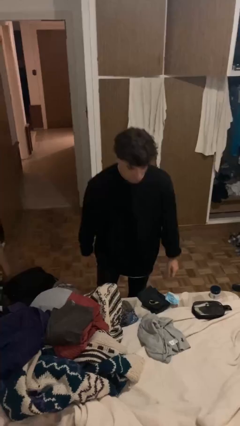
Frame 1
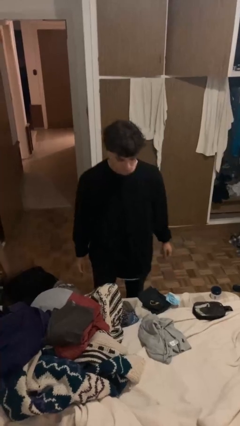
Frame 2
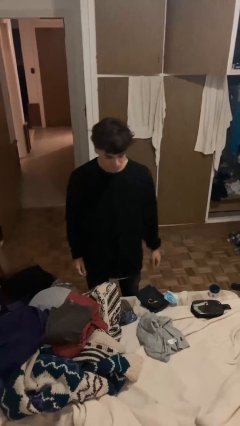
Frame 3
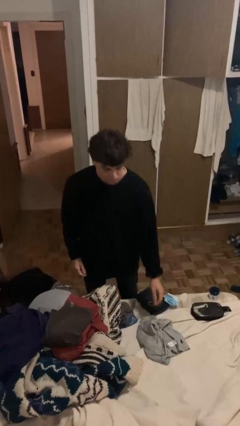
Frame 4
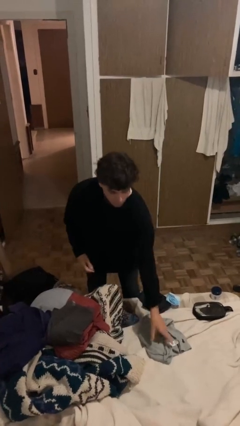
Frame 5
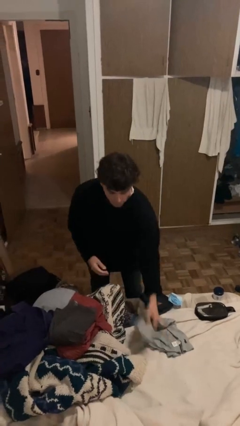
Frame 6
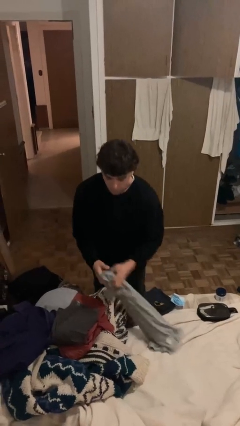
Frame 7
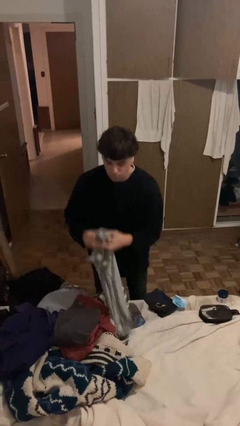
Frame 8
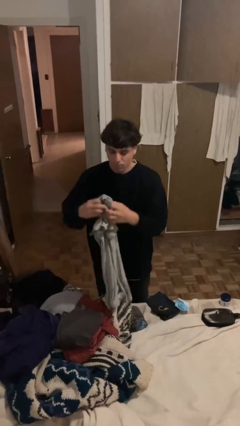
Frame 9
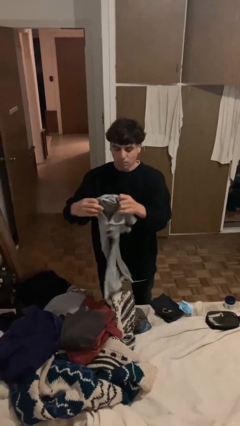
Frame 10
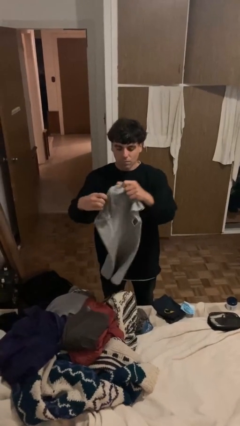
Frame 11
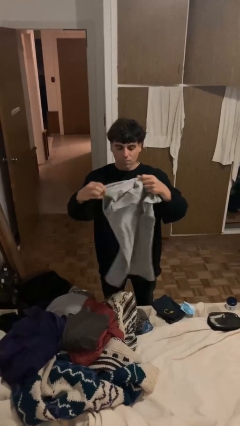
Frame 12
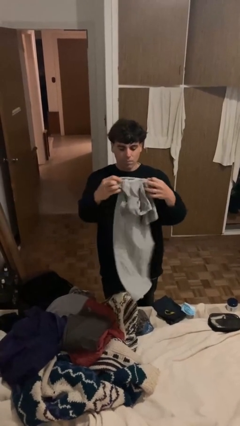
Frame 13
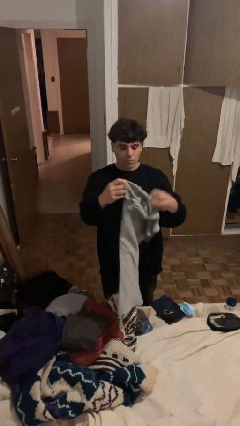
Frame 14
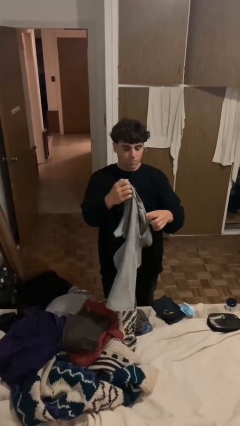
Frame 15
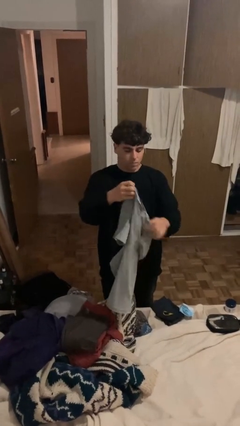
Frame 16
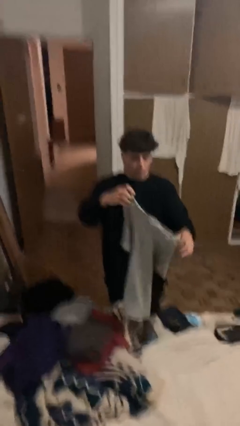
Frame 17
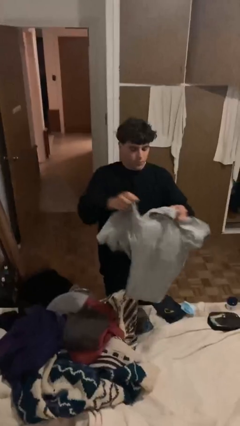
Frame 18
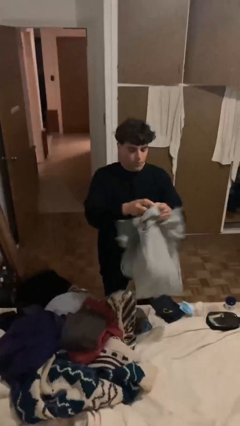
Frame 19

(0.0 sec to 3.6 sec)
person folds shirt

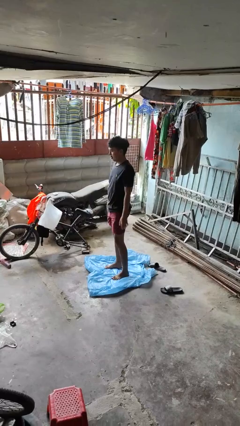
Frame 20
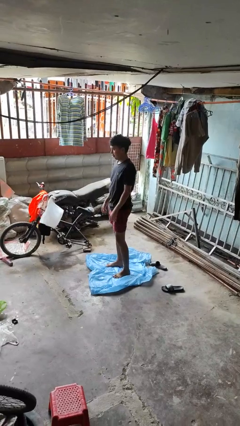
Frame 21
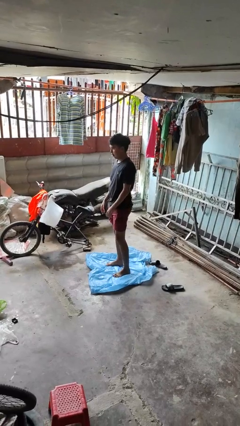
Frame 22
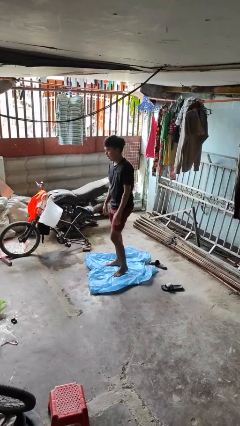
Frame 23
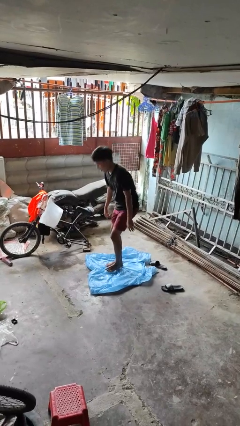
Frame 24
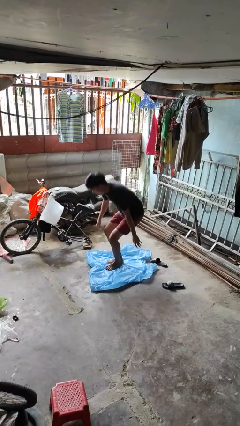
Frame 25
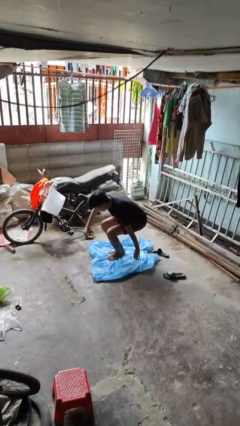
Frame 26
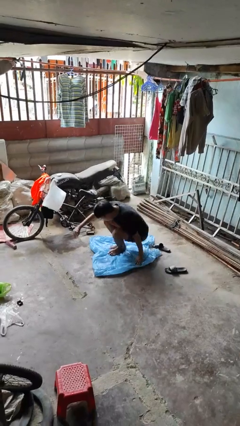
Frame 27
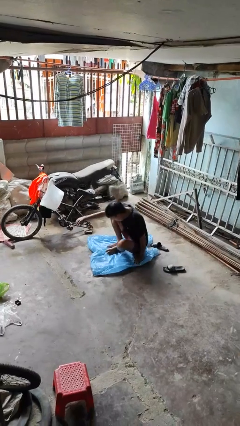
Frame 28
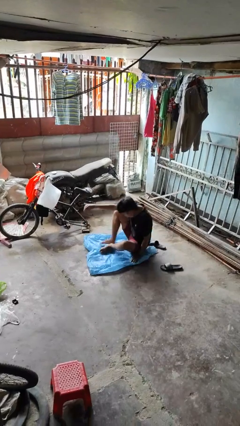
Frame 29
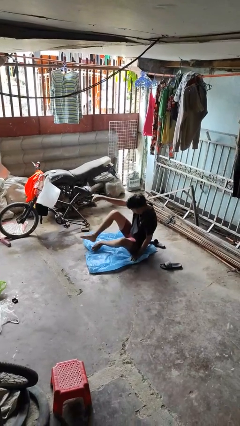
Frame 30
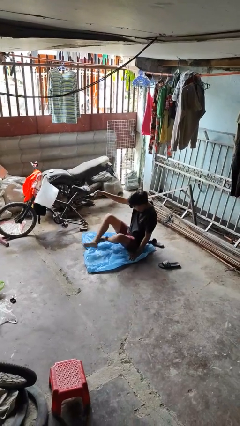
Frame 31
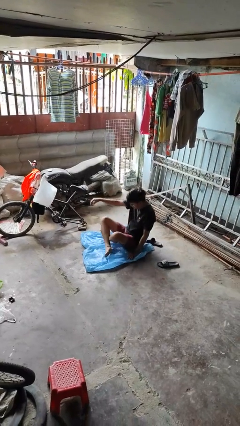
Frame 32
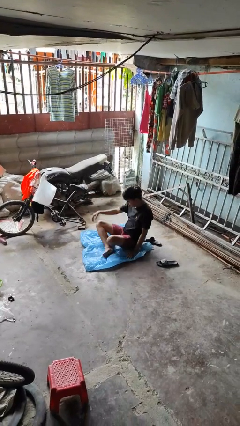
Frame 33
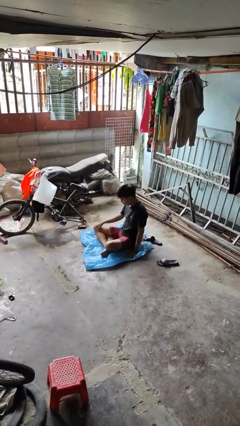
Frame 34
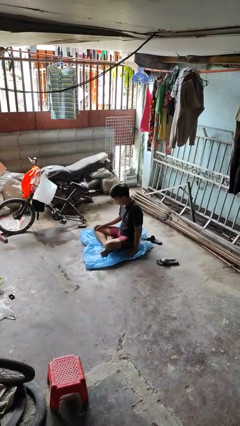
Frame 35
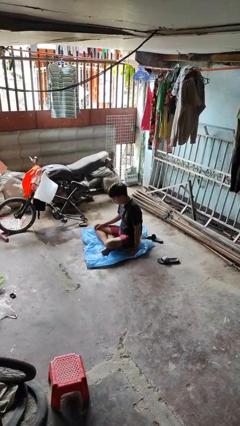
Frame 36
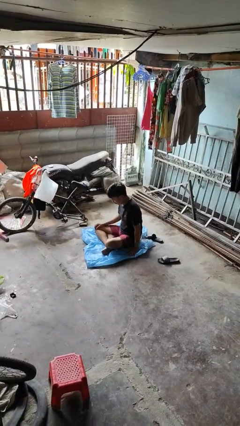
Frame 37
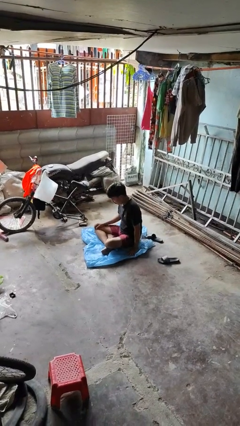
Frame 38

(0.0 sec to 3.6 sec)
person sits crisscross

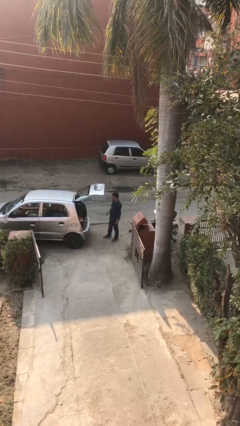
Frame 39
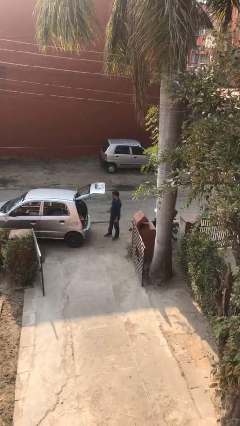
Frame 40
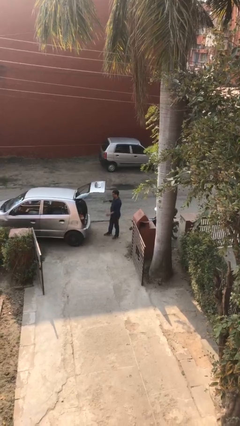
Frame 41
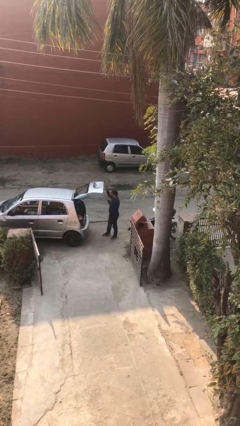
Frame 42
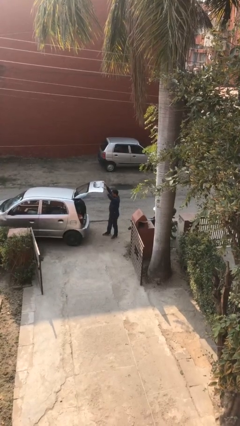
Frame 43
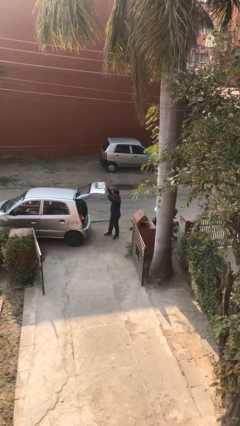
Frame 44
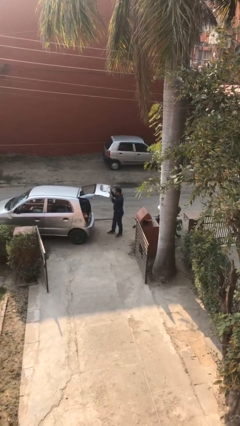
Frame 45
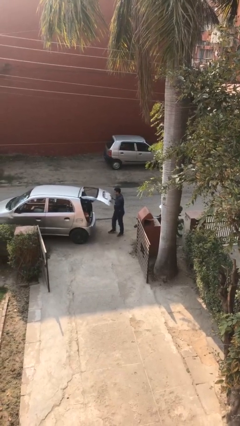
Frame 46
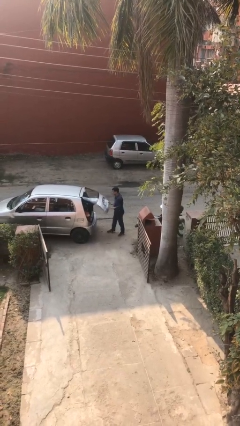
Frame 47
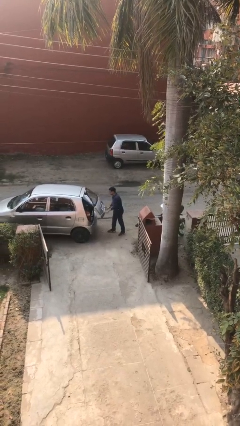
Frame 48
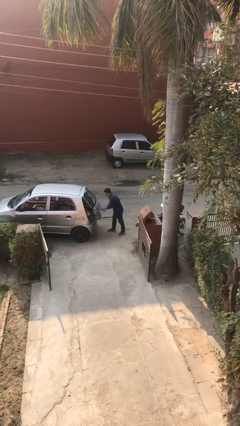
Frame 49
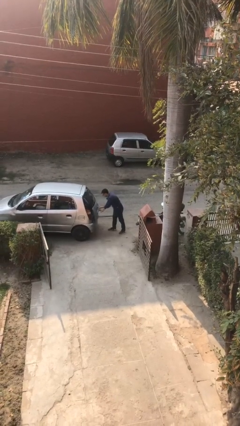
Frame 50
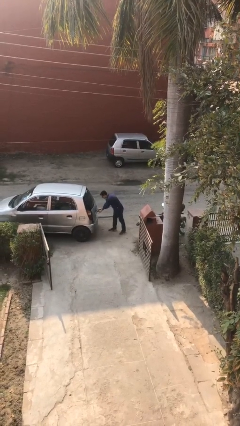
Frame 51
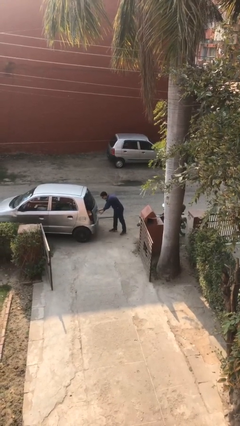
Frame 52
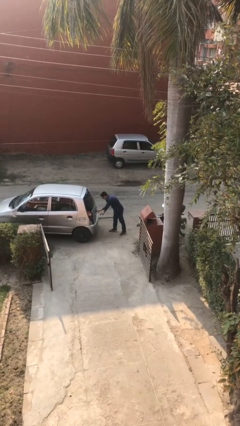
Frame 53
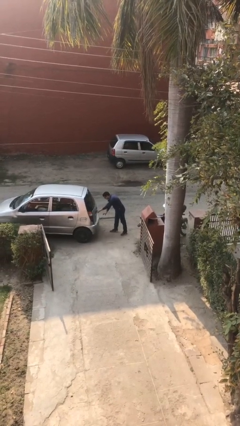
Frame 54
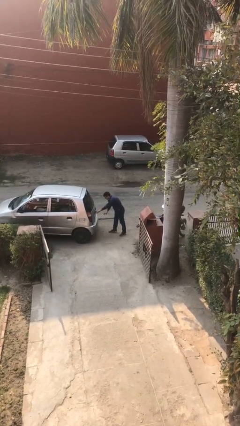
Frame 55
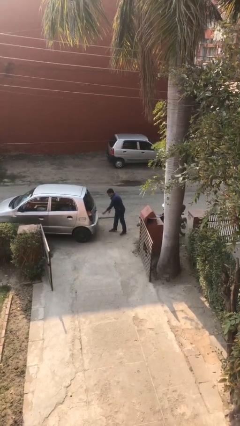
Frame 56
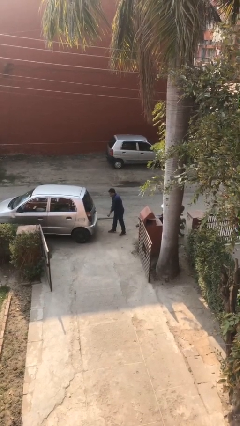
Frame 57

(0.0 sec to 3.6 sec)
person closes car trunk

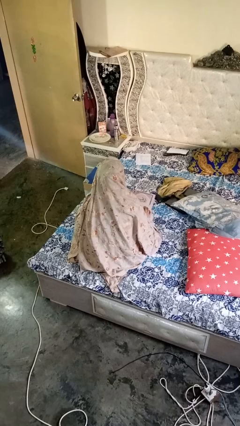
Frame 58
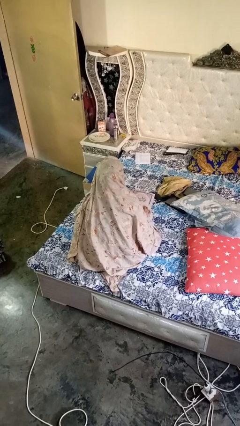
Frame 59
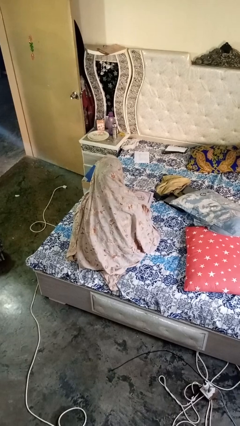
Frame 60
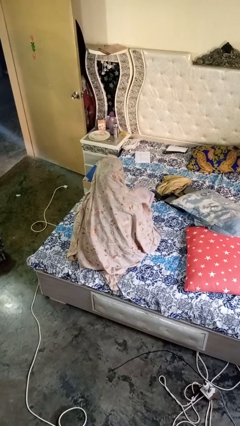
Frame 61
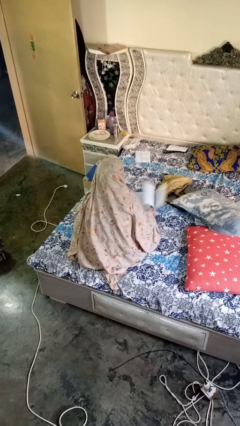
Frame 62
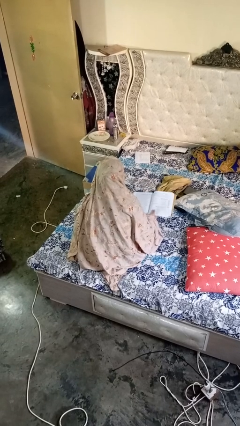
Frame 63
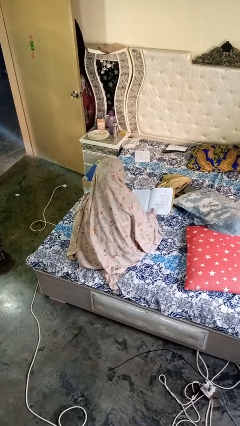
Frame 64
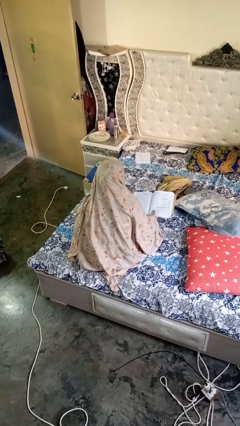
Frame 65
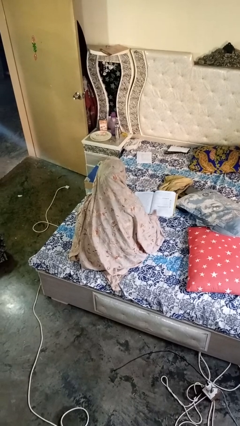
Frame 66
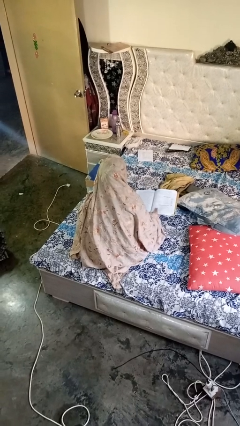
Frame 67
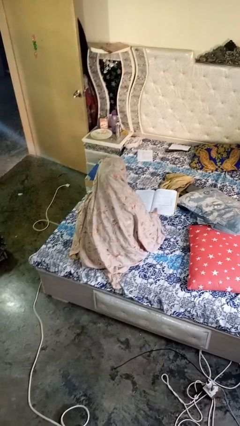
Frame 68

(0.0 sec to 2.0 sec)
person reads book

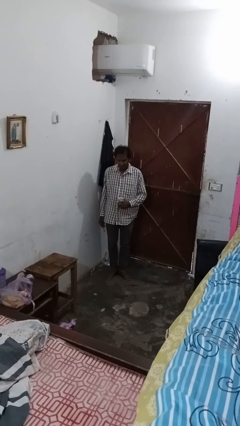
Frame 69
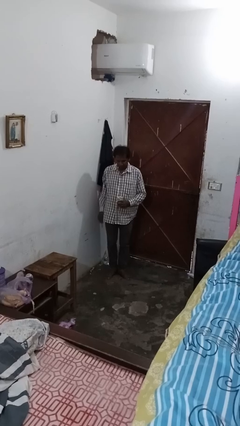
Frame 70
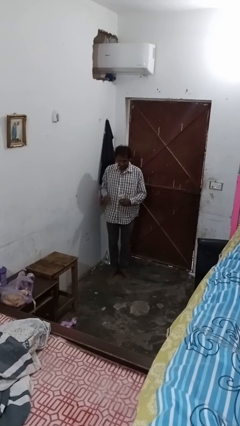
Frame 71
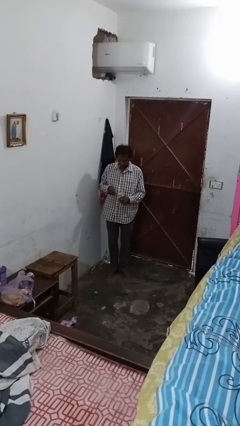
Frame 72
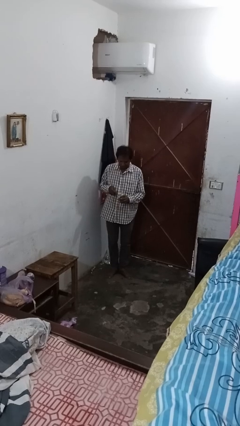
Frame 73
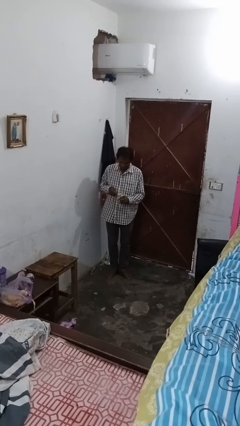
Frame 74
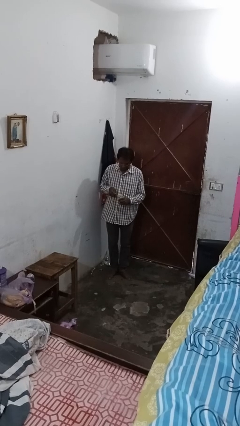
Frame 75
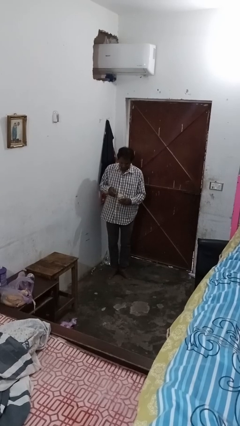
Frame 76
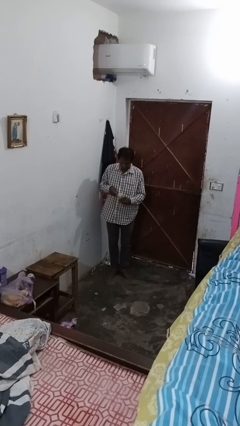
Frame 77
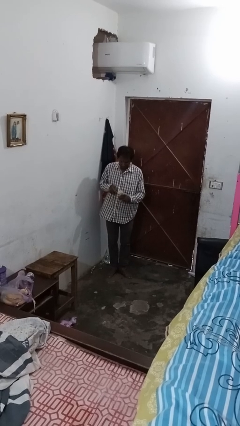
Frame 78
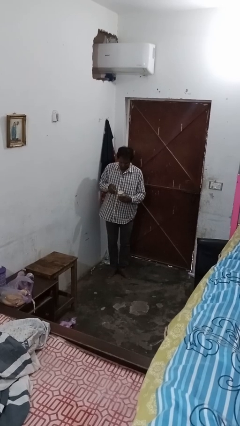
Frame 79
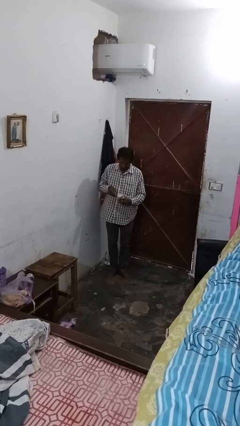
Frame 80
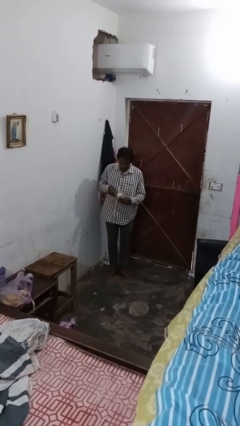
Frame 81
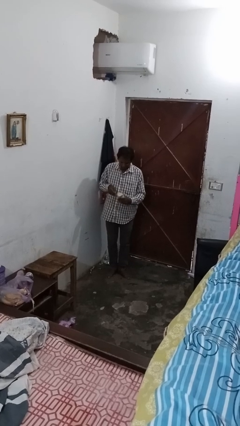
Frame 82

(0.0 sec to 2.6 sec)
person opens can with can opener

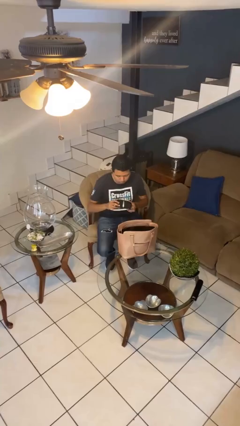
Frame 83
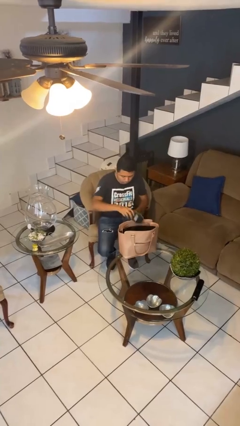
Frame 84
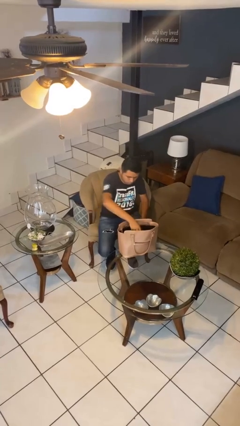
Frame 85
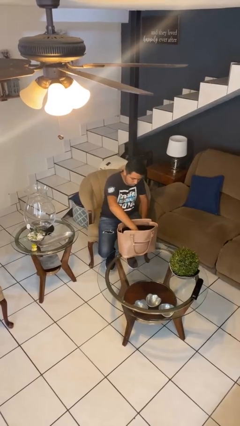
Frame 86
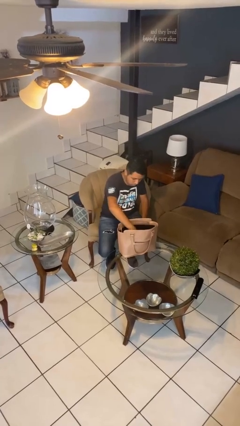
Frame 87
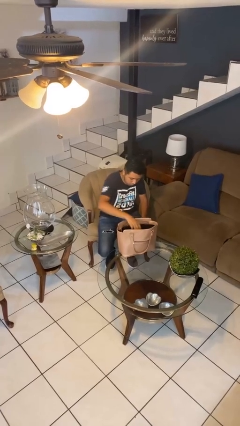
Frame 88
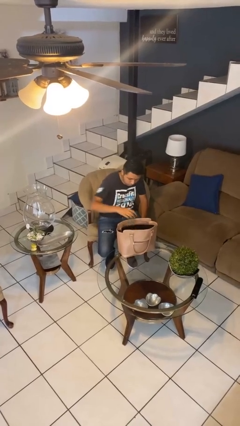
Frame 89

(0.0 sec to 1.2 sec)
person puts object into purse

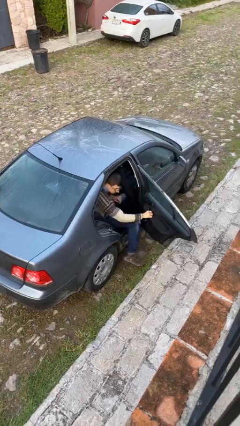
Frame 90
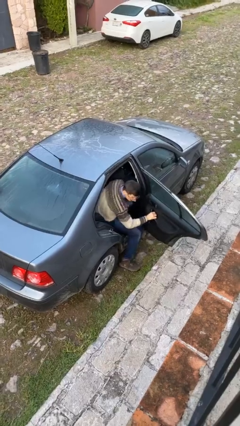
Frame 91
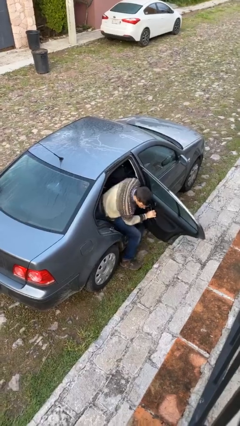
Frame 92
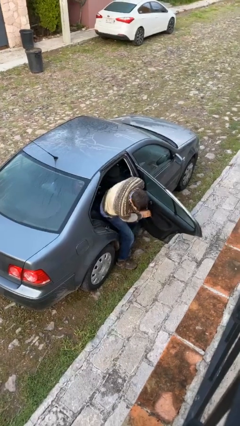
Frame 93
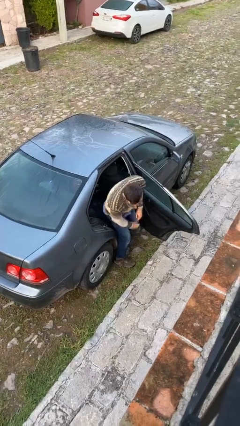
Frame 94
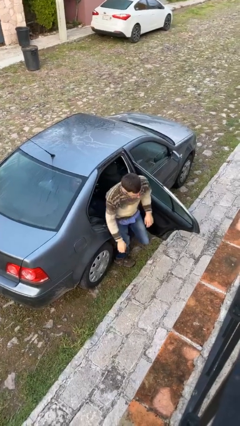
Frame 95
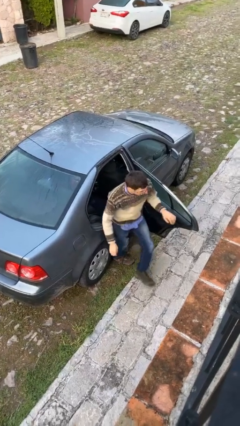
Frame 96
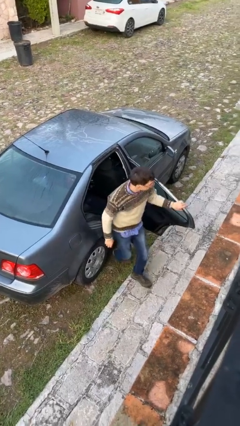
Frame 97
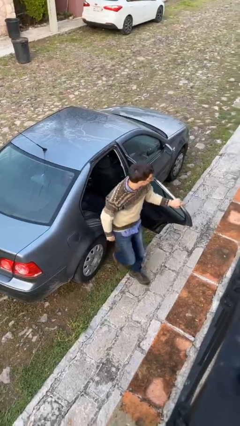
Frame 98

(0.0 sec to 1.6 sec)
person exits car
